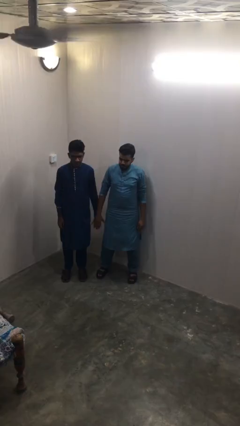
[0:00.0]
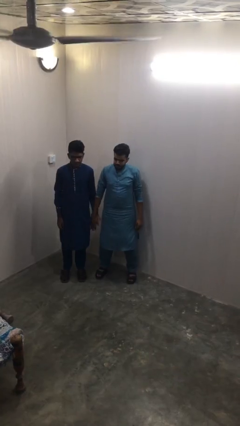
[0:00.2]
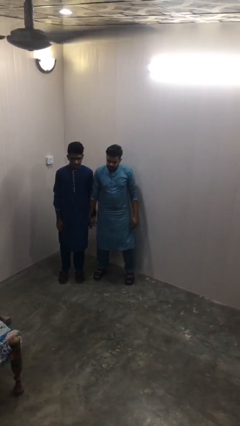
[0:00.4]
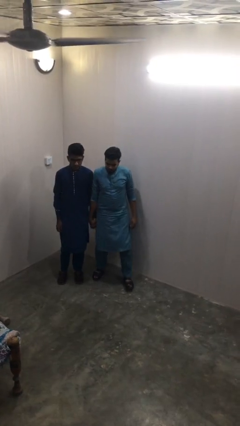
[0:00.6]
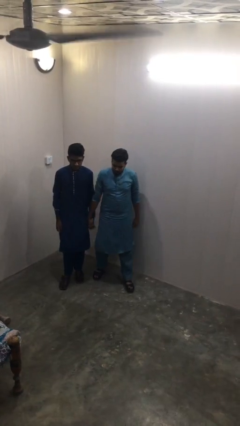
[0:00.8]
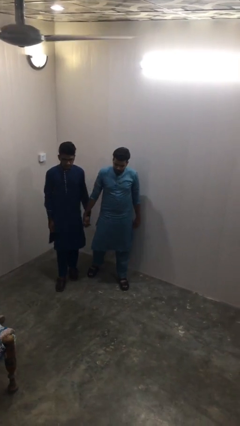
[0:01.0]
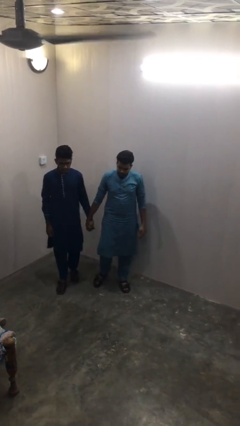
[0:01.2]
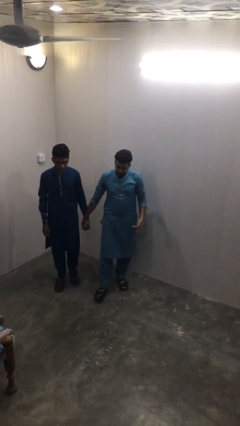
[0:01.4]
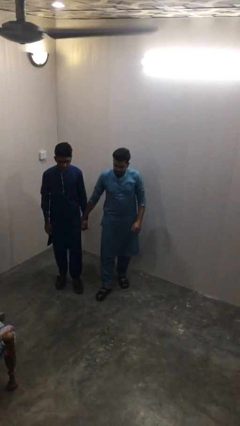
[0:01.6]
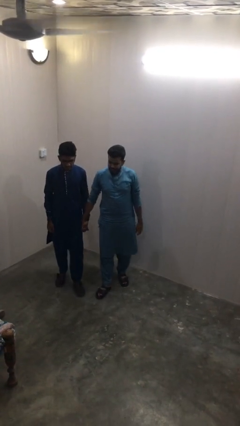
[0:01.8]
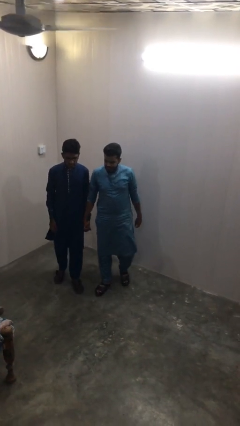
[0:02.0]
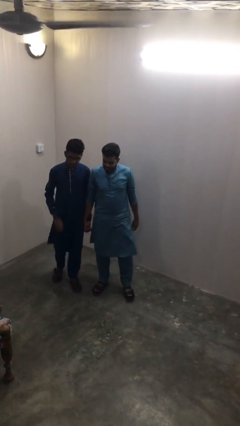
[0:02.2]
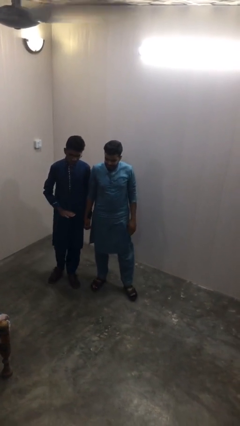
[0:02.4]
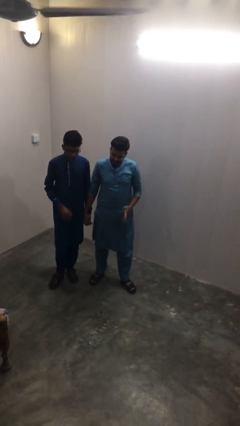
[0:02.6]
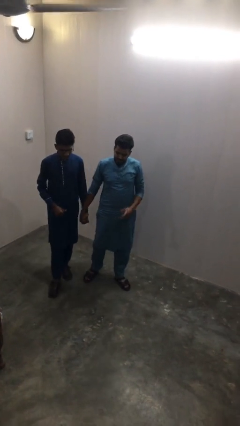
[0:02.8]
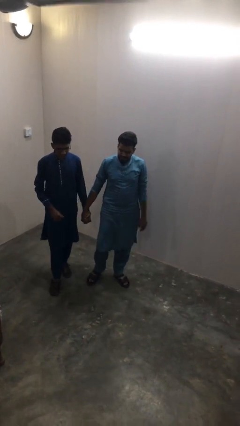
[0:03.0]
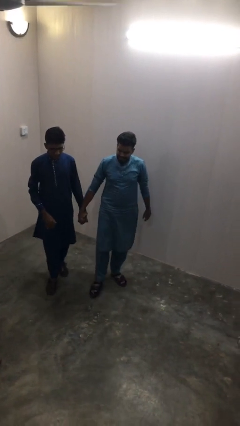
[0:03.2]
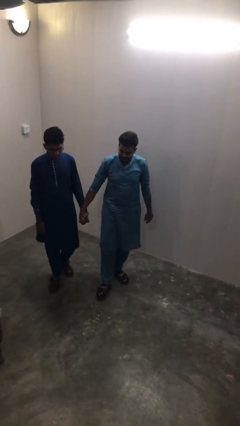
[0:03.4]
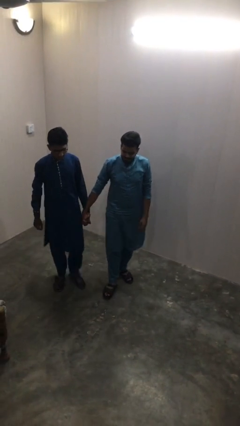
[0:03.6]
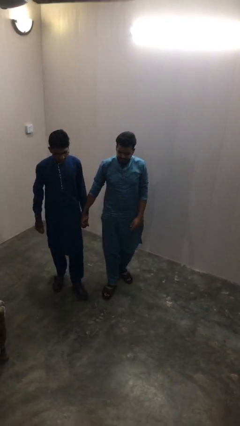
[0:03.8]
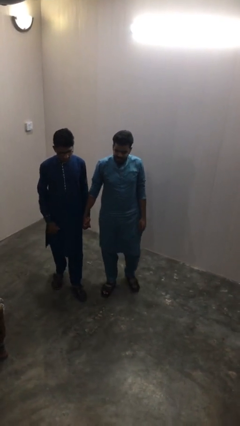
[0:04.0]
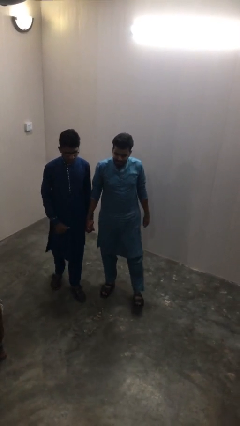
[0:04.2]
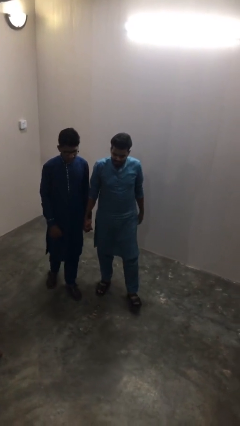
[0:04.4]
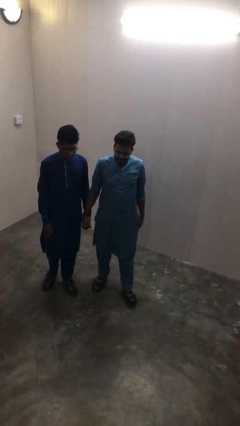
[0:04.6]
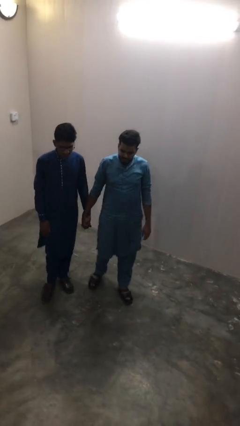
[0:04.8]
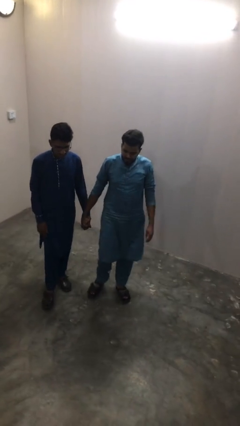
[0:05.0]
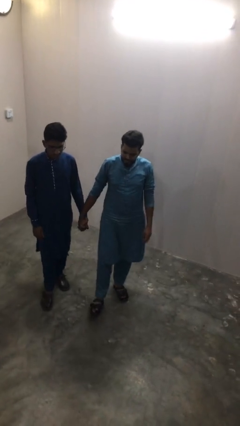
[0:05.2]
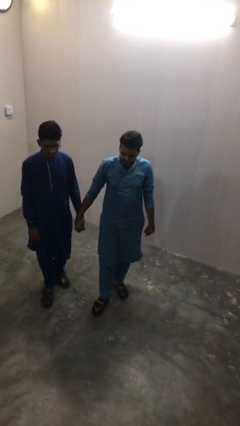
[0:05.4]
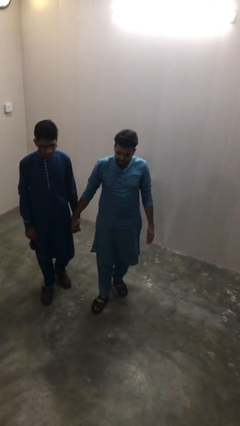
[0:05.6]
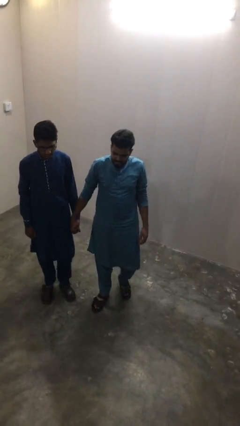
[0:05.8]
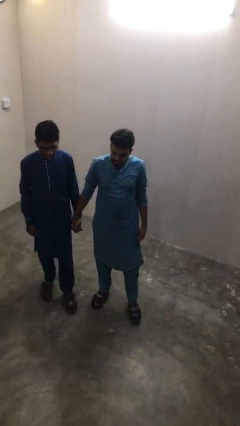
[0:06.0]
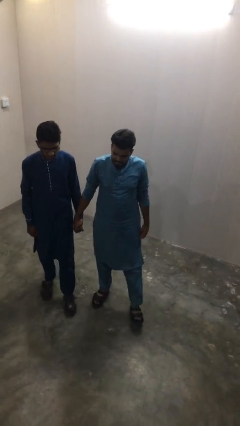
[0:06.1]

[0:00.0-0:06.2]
person holds hand

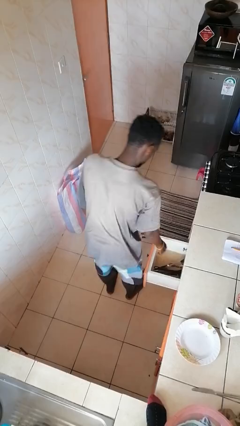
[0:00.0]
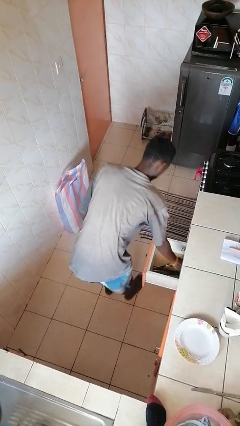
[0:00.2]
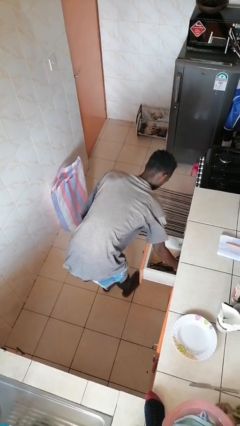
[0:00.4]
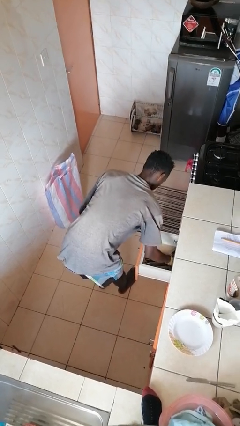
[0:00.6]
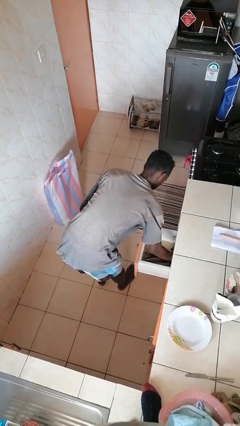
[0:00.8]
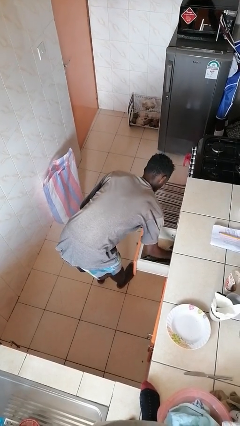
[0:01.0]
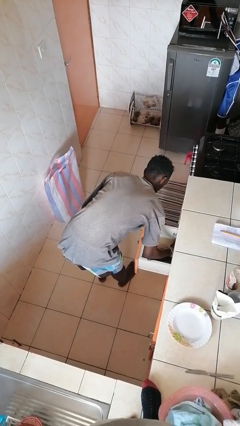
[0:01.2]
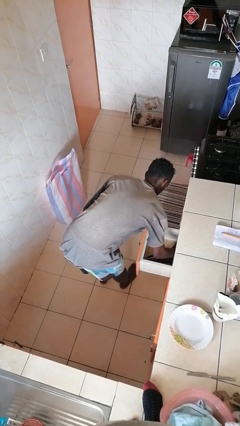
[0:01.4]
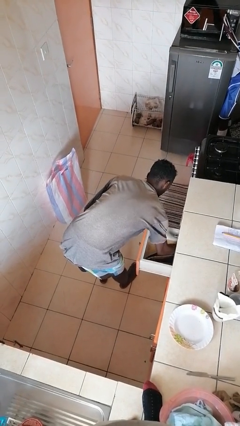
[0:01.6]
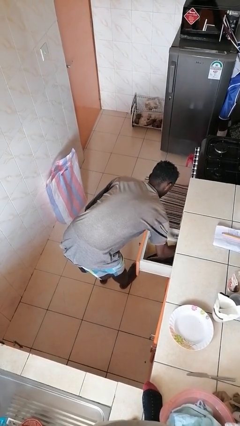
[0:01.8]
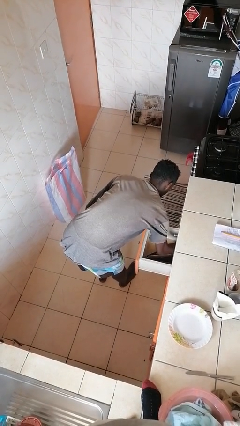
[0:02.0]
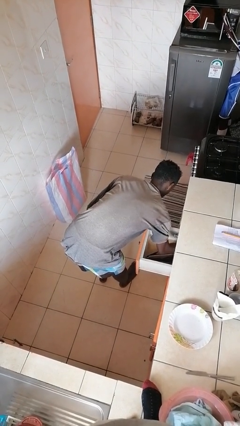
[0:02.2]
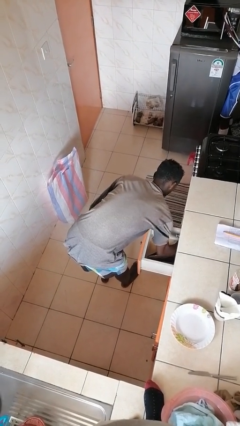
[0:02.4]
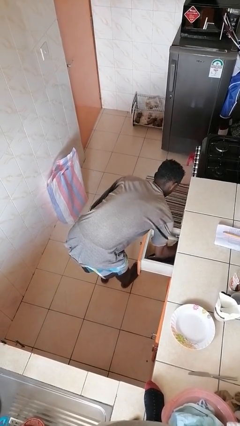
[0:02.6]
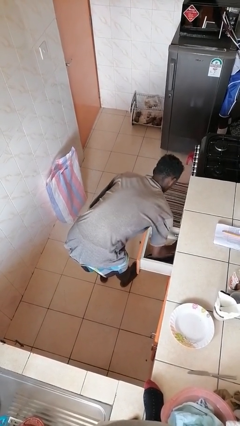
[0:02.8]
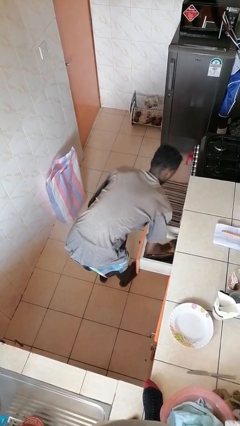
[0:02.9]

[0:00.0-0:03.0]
person searches in kitchen drawer

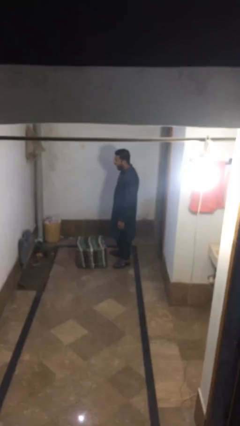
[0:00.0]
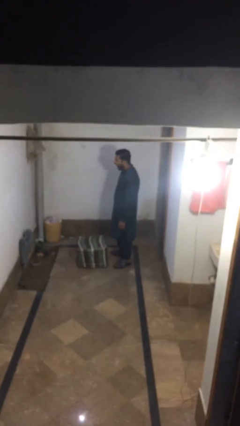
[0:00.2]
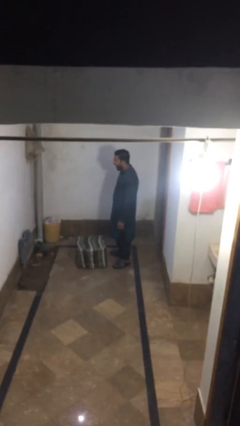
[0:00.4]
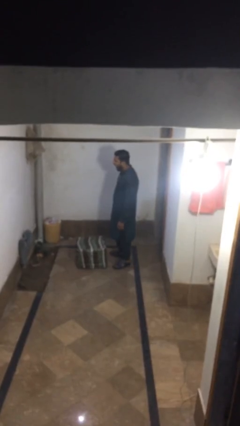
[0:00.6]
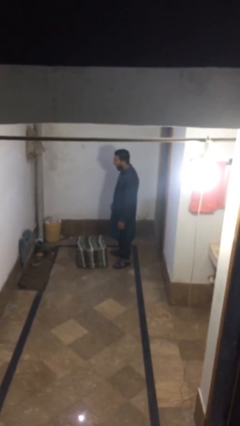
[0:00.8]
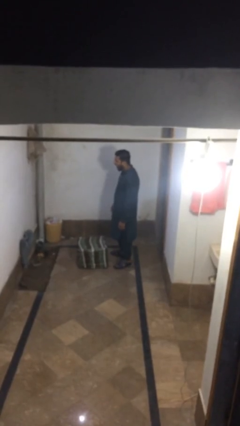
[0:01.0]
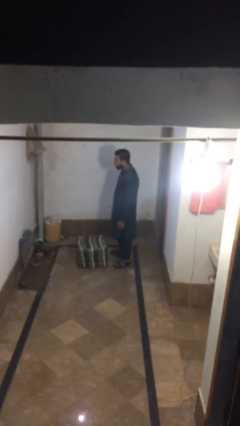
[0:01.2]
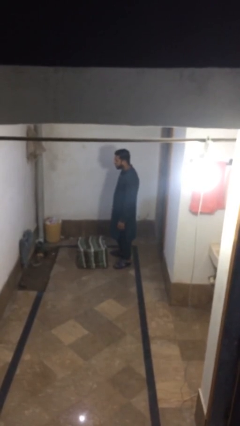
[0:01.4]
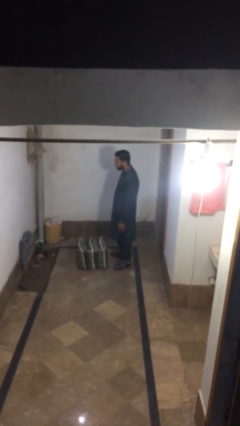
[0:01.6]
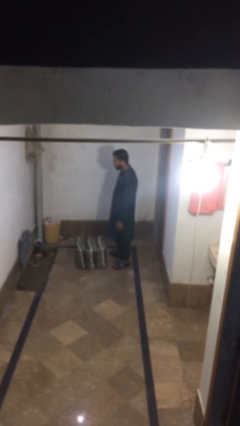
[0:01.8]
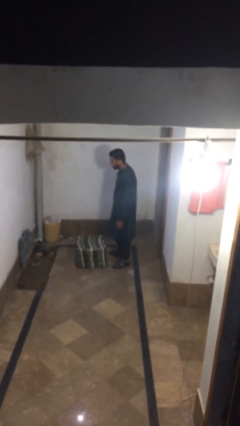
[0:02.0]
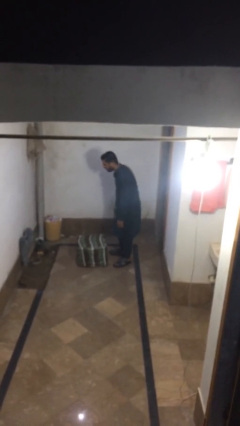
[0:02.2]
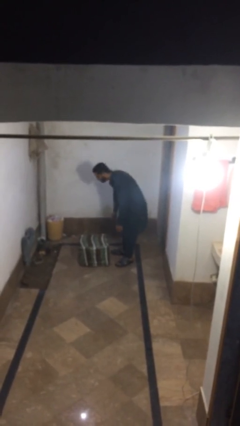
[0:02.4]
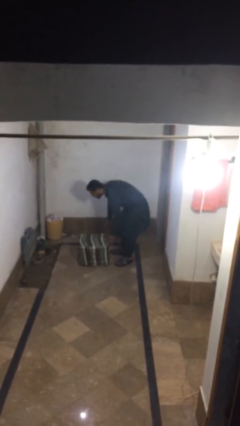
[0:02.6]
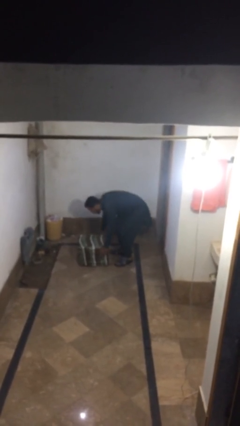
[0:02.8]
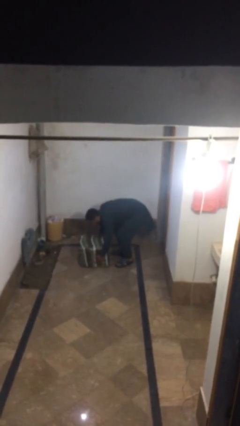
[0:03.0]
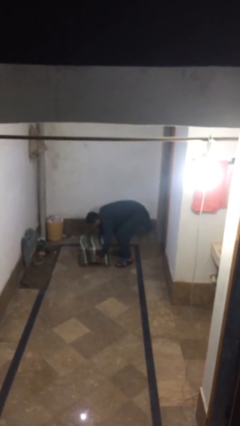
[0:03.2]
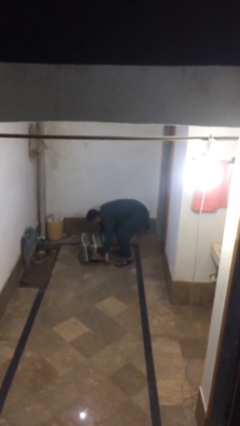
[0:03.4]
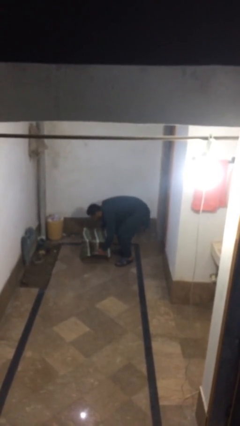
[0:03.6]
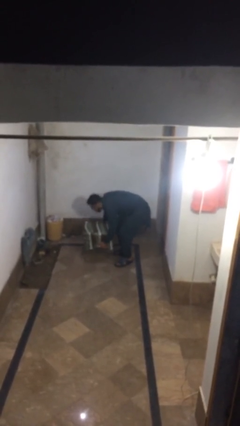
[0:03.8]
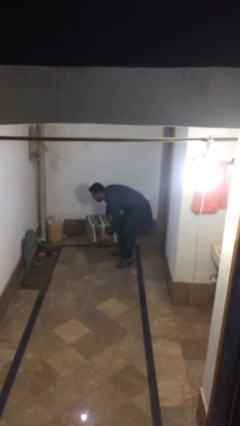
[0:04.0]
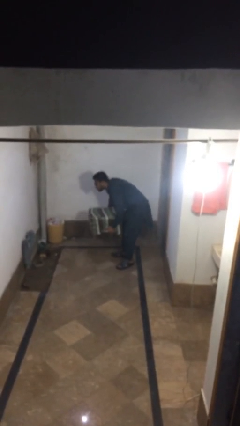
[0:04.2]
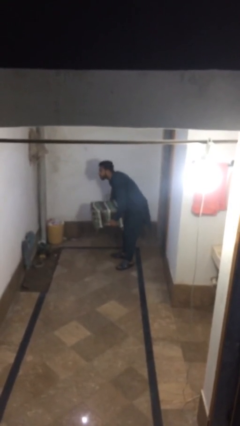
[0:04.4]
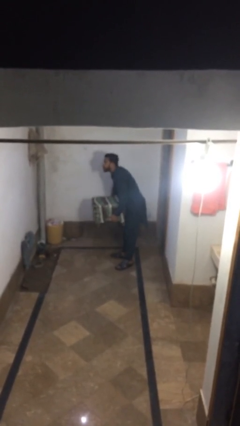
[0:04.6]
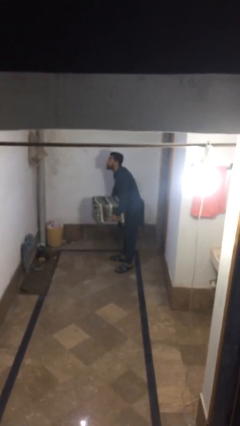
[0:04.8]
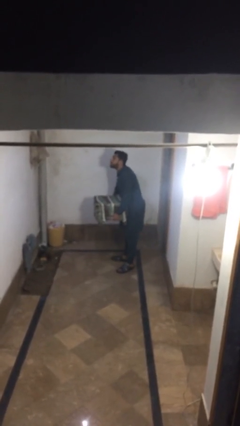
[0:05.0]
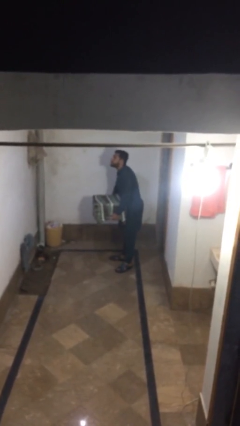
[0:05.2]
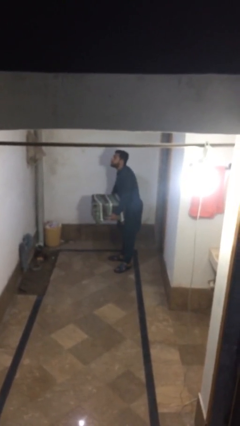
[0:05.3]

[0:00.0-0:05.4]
person picks up object from floor

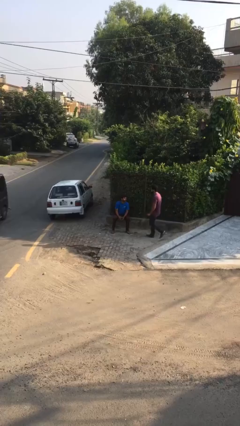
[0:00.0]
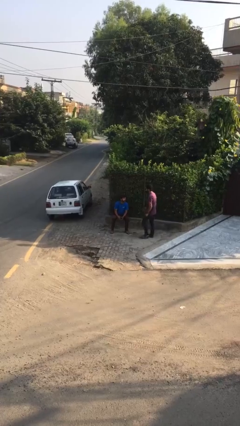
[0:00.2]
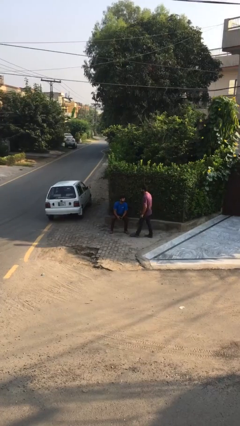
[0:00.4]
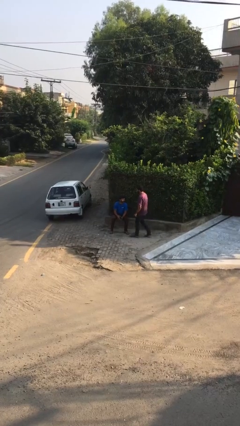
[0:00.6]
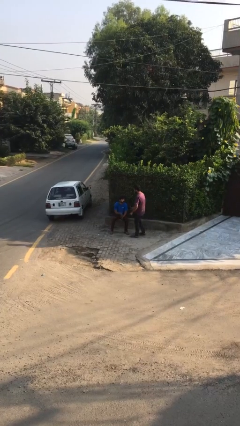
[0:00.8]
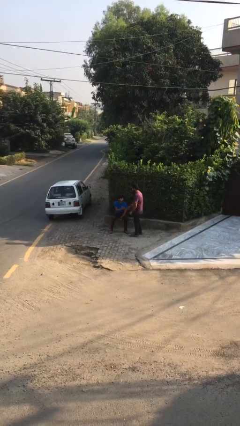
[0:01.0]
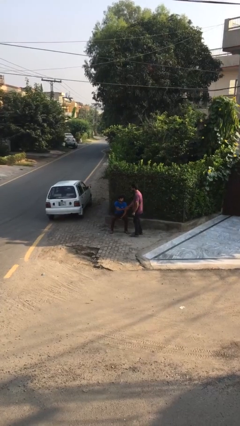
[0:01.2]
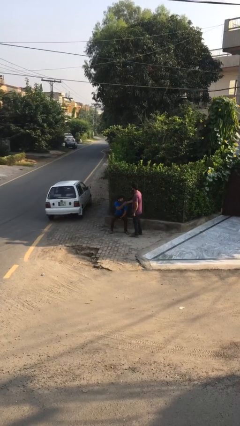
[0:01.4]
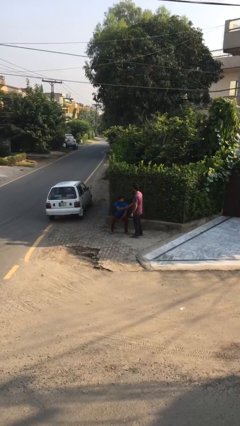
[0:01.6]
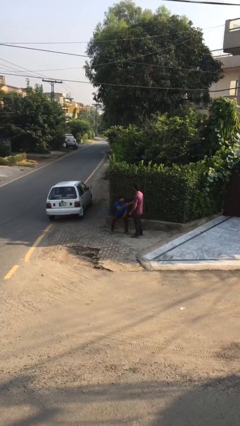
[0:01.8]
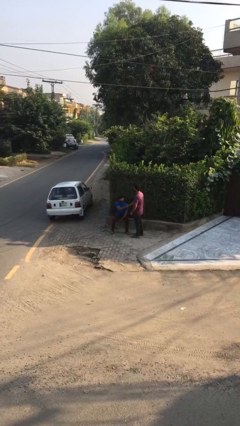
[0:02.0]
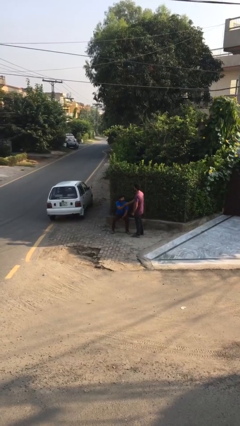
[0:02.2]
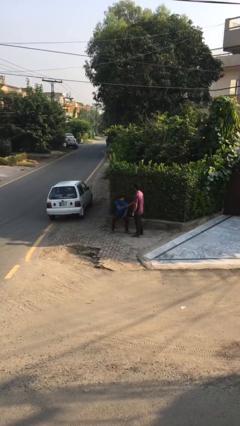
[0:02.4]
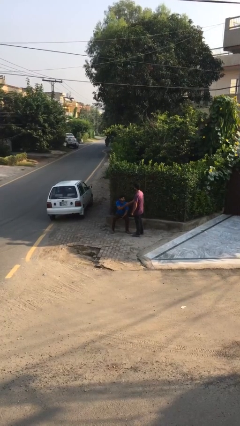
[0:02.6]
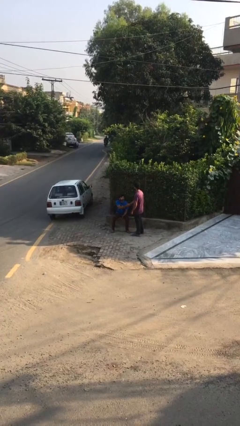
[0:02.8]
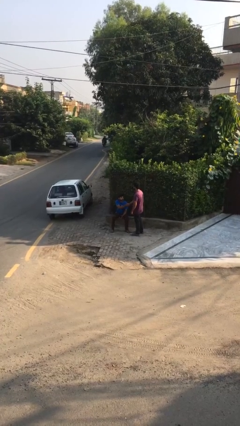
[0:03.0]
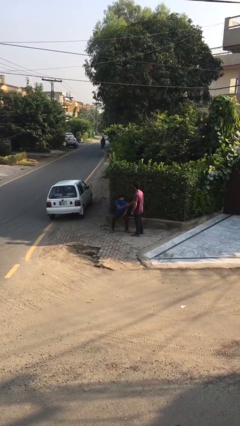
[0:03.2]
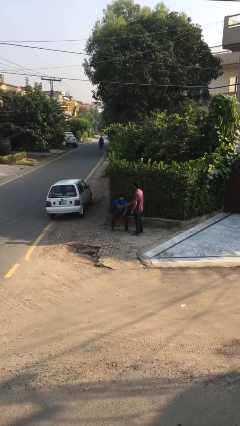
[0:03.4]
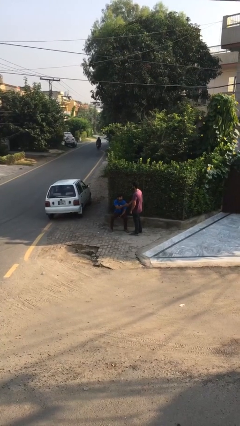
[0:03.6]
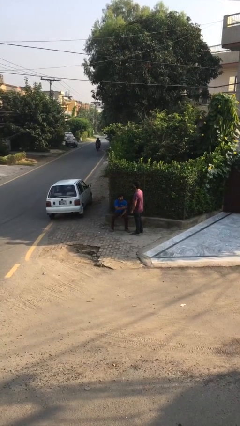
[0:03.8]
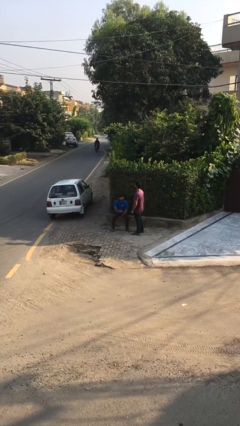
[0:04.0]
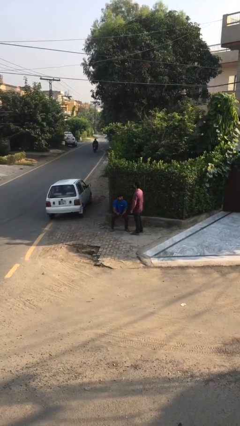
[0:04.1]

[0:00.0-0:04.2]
person shakes hand
